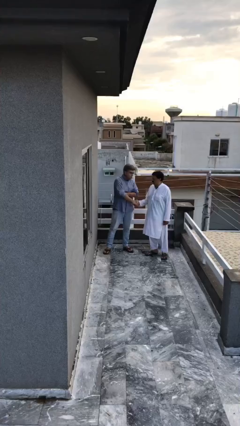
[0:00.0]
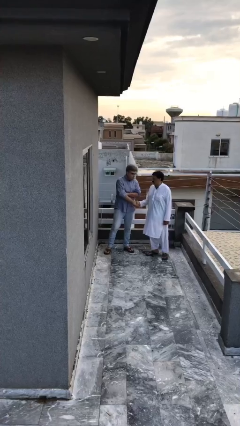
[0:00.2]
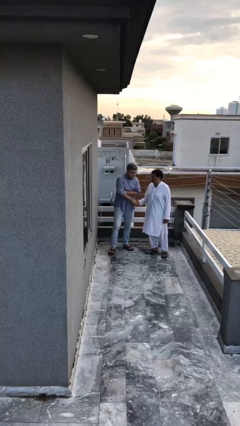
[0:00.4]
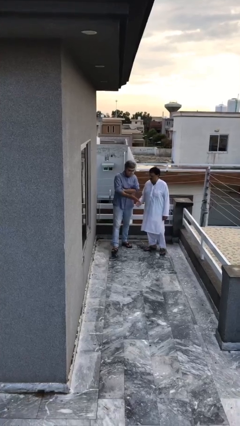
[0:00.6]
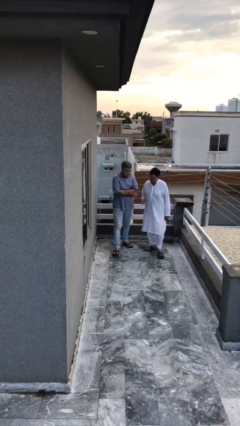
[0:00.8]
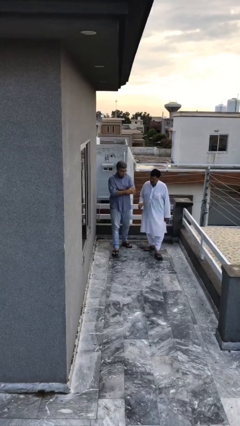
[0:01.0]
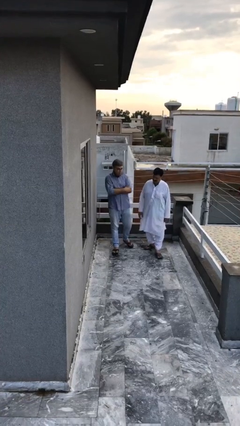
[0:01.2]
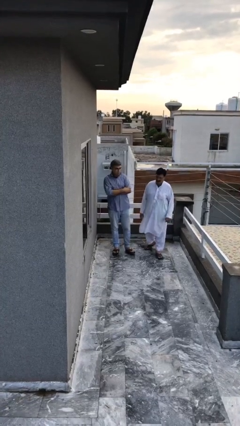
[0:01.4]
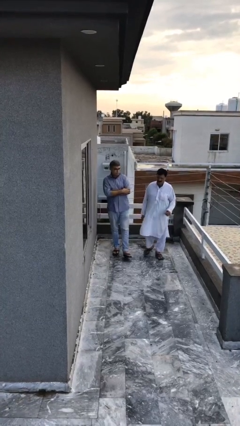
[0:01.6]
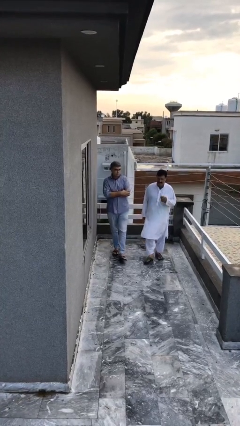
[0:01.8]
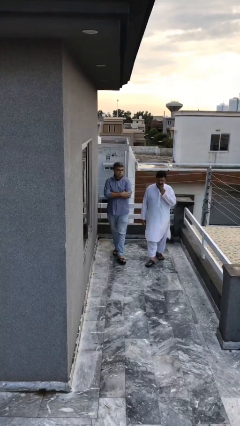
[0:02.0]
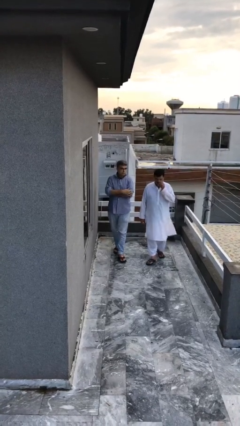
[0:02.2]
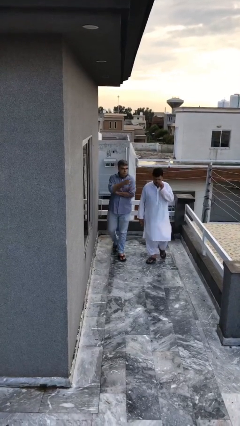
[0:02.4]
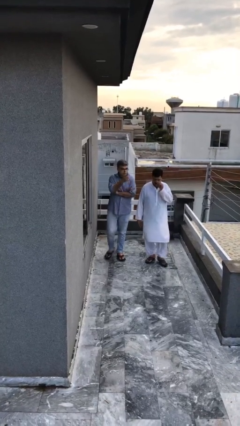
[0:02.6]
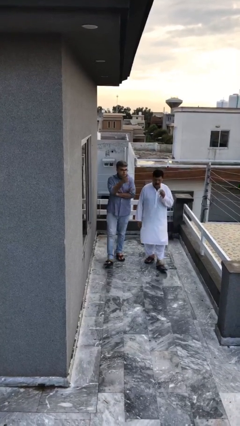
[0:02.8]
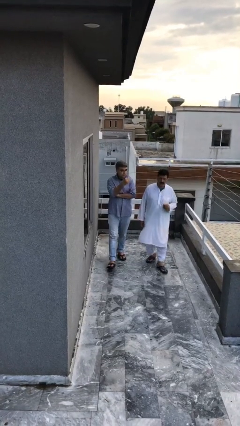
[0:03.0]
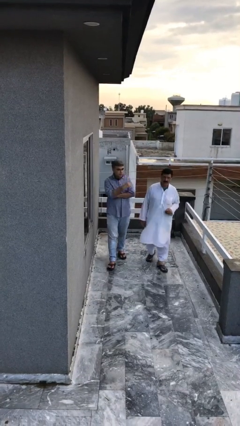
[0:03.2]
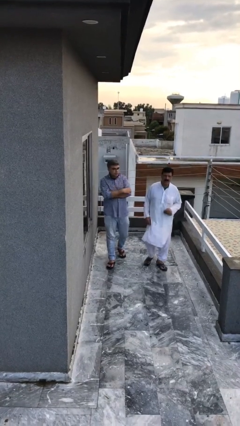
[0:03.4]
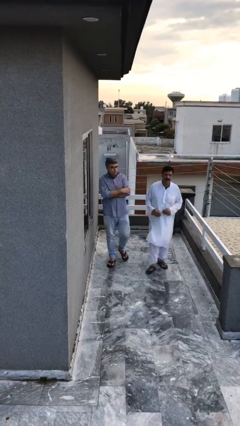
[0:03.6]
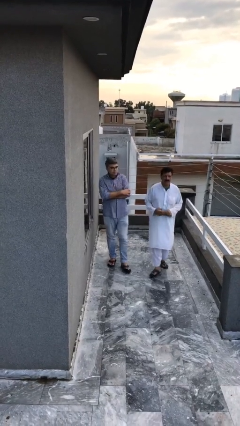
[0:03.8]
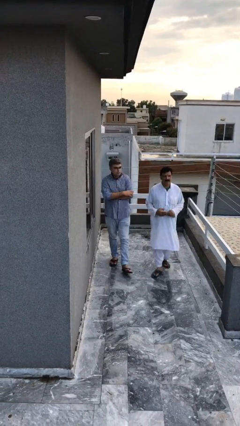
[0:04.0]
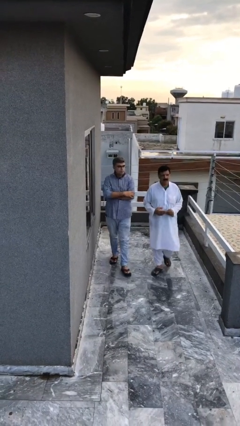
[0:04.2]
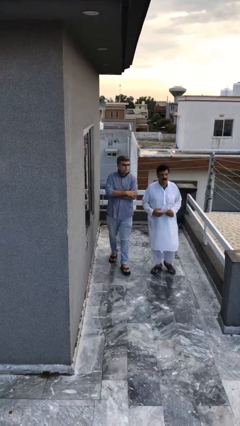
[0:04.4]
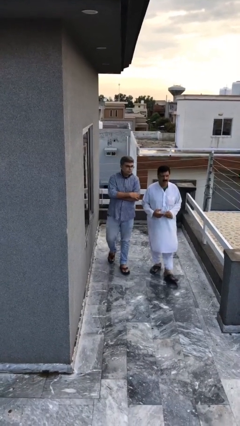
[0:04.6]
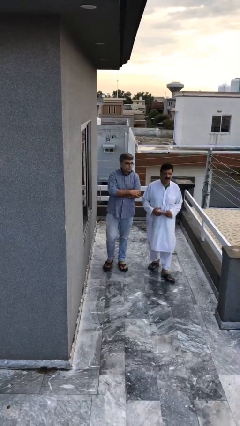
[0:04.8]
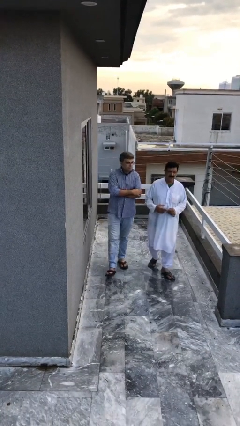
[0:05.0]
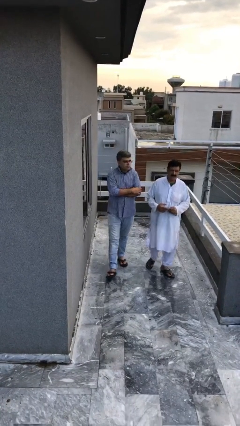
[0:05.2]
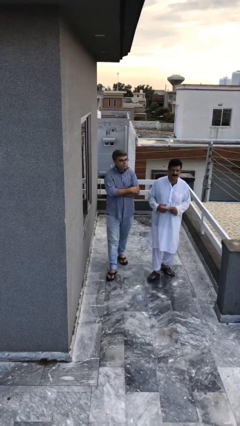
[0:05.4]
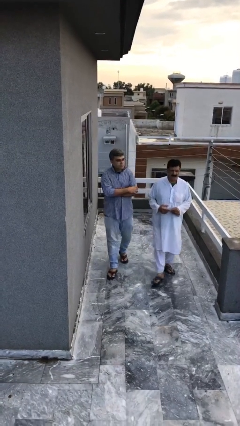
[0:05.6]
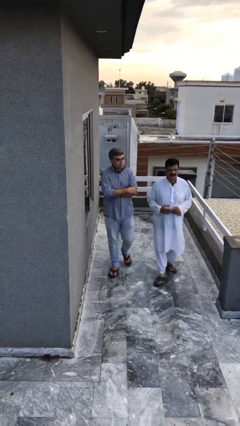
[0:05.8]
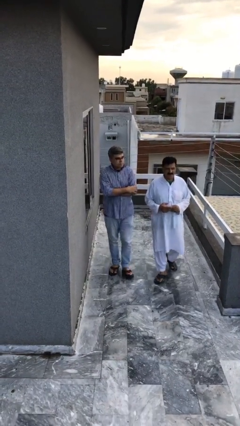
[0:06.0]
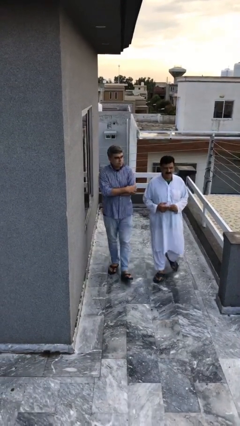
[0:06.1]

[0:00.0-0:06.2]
person talks to person

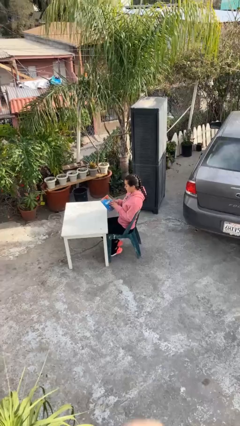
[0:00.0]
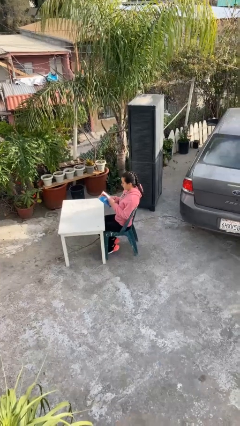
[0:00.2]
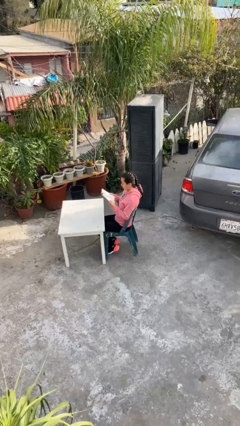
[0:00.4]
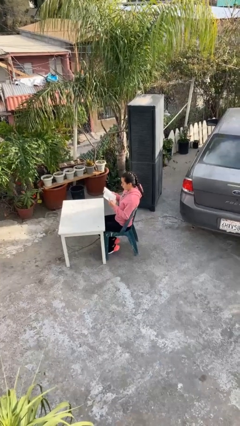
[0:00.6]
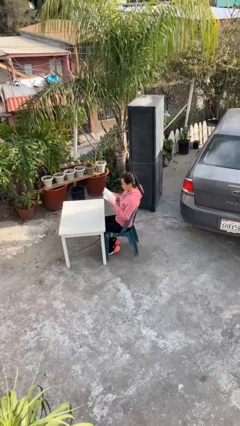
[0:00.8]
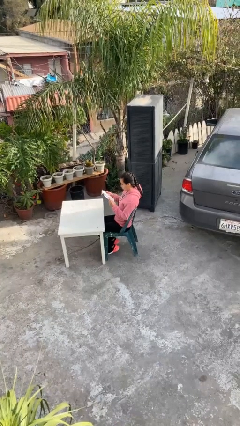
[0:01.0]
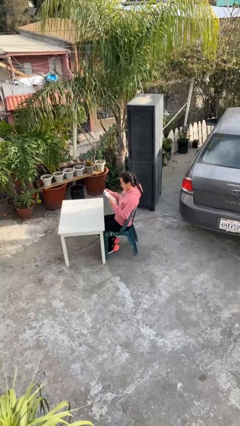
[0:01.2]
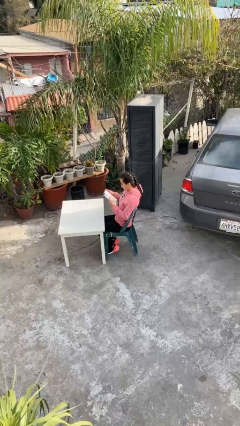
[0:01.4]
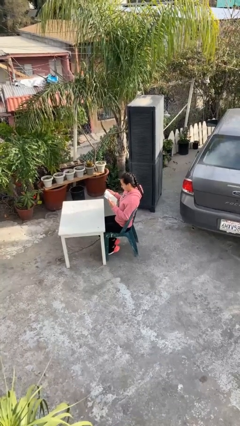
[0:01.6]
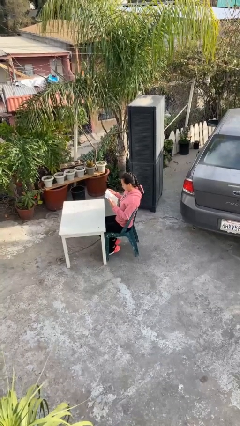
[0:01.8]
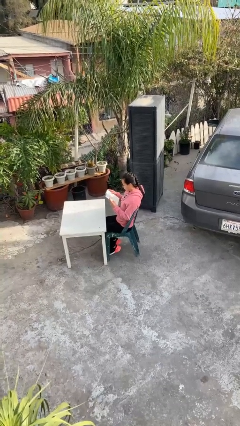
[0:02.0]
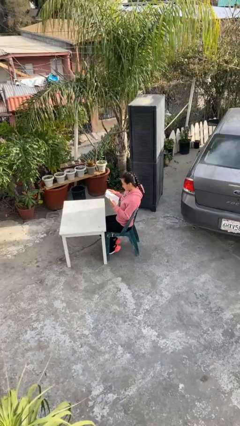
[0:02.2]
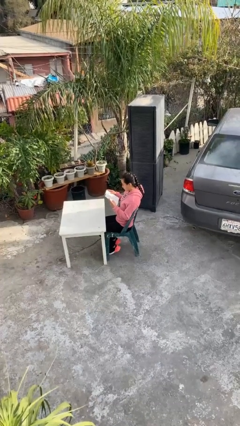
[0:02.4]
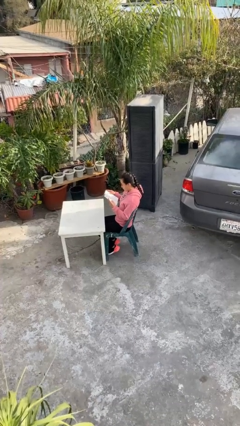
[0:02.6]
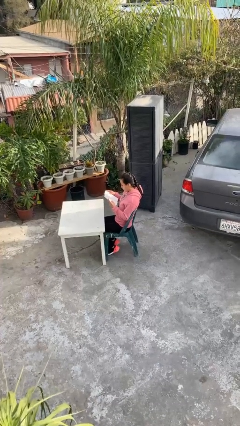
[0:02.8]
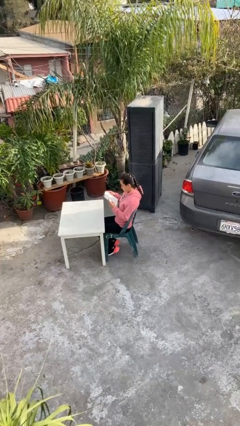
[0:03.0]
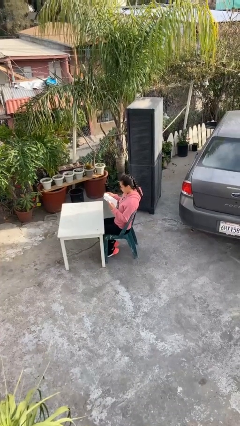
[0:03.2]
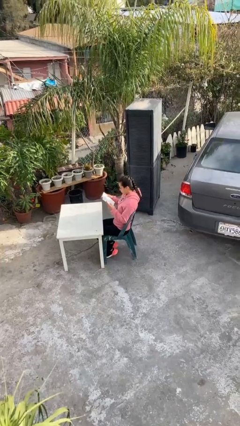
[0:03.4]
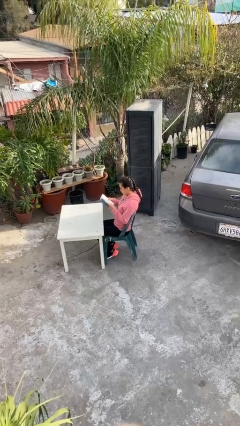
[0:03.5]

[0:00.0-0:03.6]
person reads document

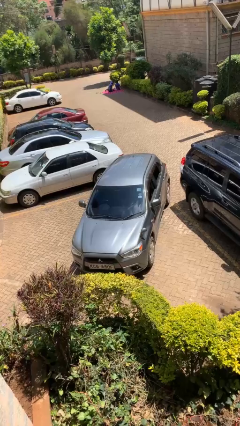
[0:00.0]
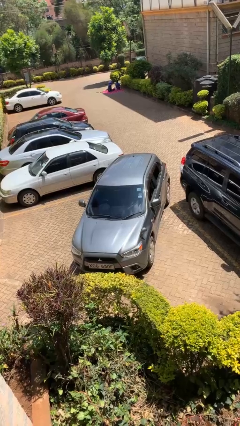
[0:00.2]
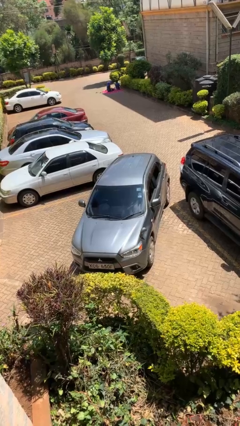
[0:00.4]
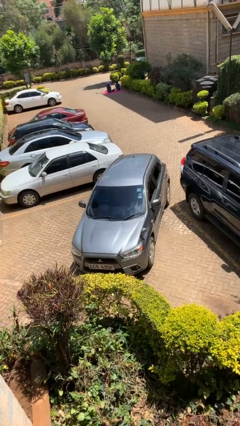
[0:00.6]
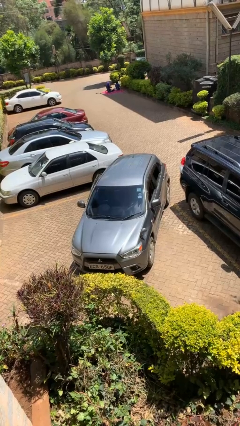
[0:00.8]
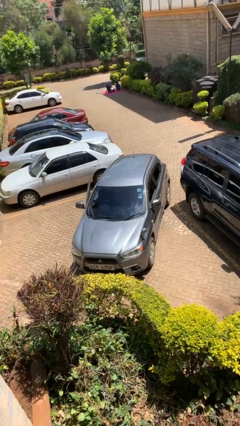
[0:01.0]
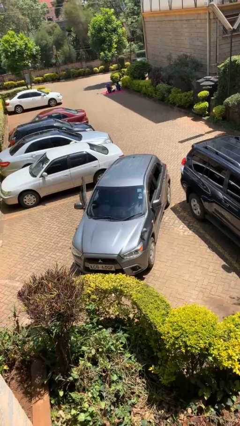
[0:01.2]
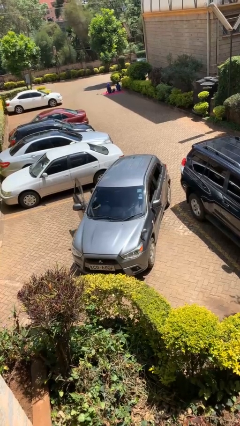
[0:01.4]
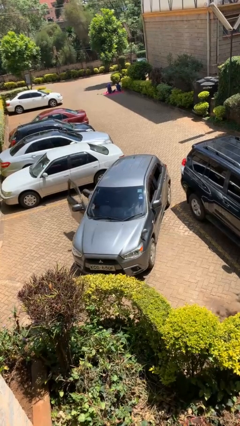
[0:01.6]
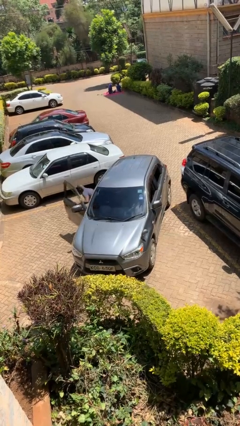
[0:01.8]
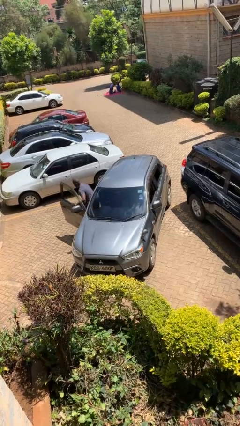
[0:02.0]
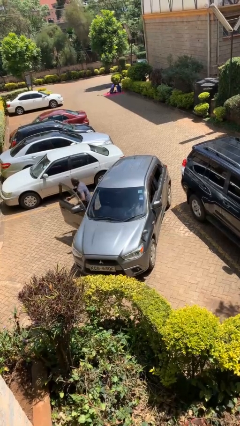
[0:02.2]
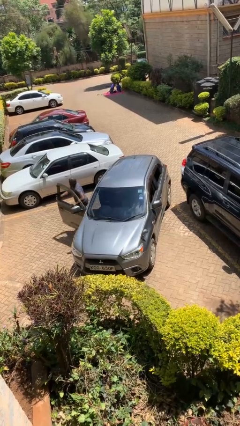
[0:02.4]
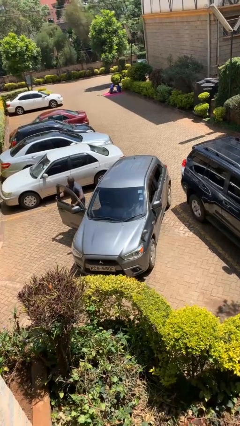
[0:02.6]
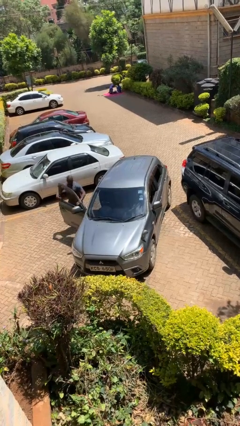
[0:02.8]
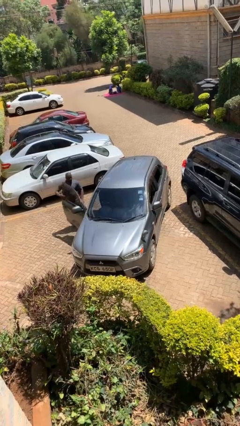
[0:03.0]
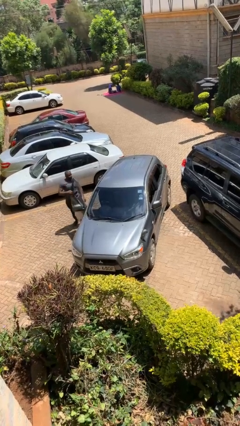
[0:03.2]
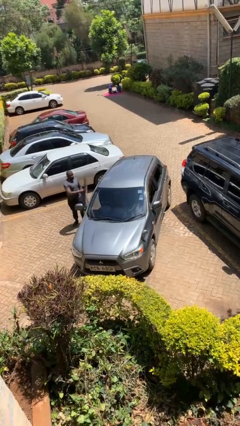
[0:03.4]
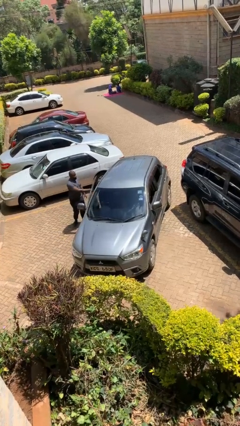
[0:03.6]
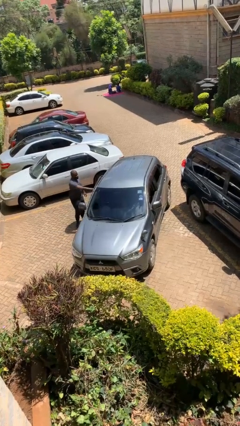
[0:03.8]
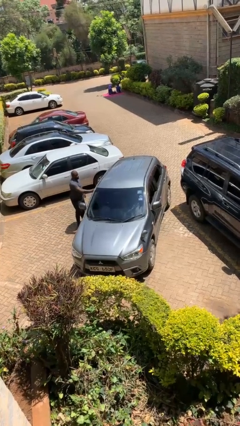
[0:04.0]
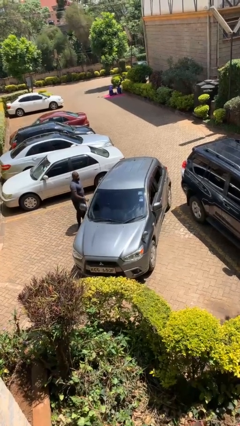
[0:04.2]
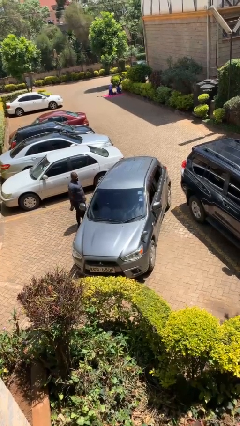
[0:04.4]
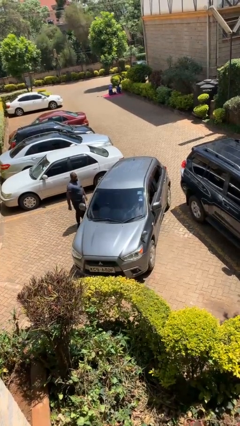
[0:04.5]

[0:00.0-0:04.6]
car drops off person

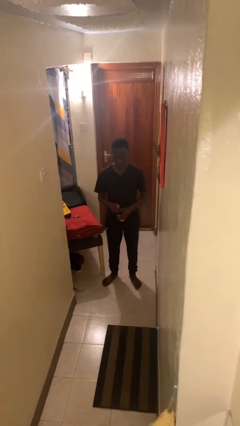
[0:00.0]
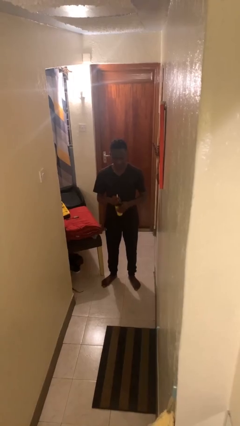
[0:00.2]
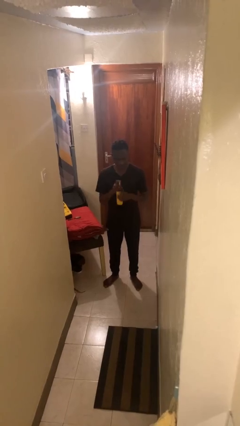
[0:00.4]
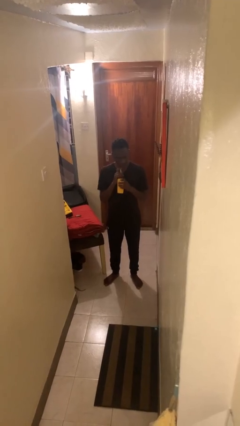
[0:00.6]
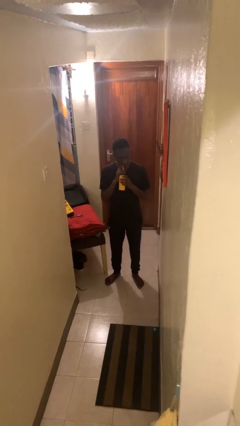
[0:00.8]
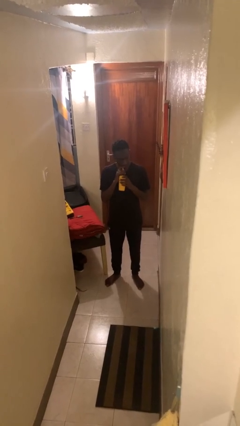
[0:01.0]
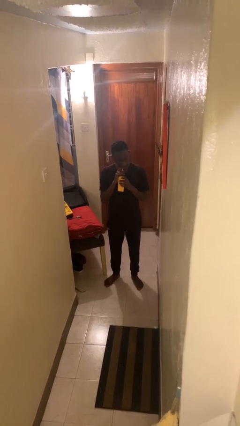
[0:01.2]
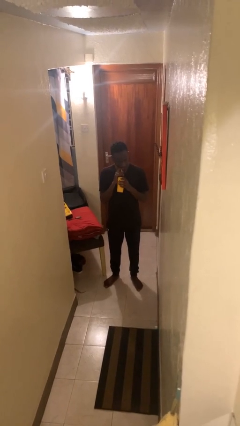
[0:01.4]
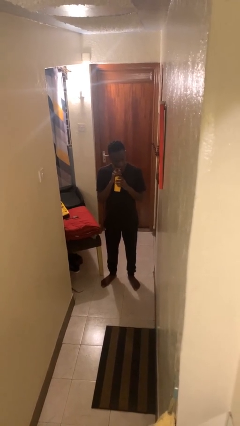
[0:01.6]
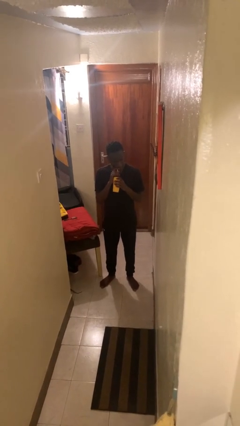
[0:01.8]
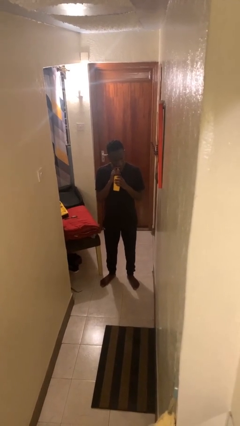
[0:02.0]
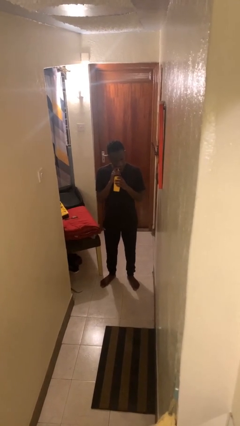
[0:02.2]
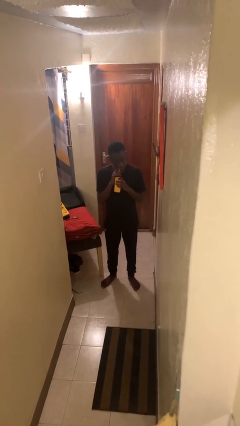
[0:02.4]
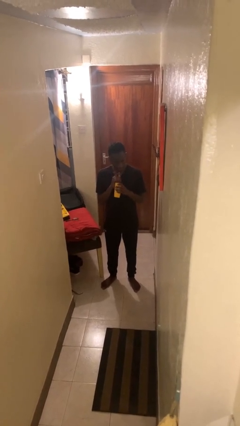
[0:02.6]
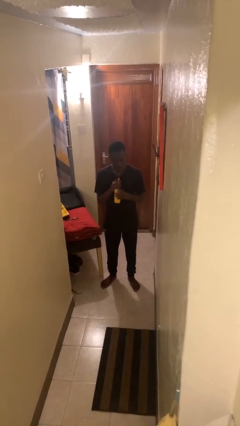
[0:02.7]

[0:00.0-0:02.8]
person drinks from straw

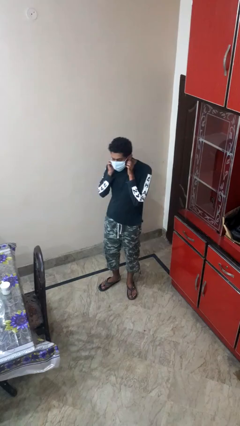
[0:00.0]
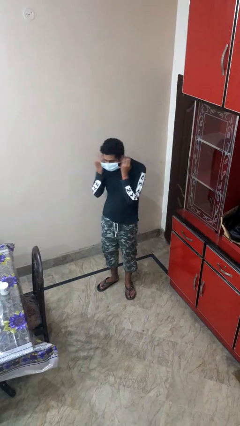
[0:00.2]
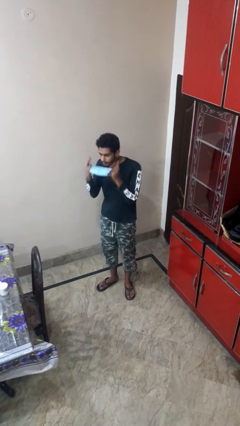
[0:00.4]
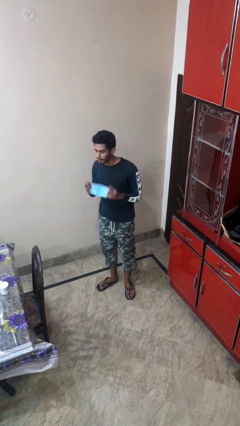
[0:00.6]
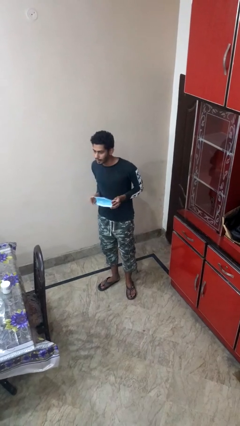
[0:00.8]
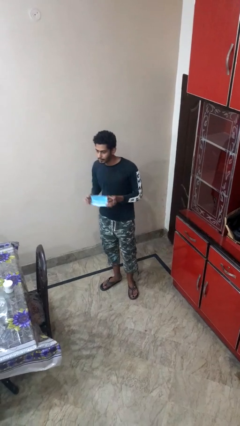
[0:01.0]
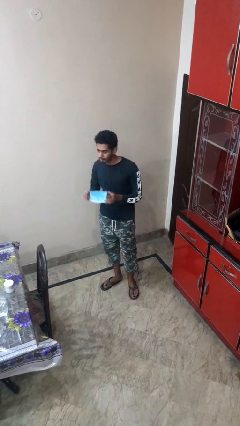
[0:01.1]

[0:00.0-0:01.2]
person takes off facemask
